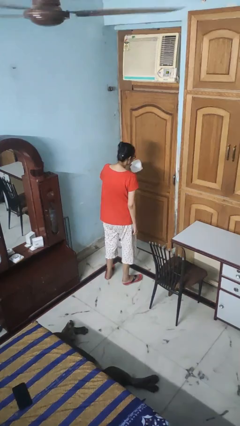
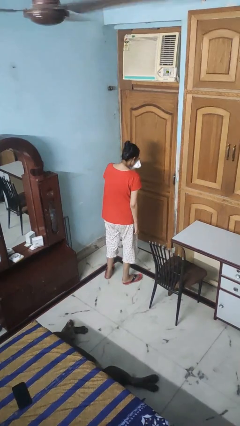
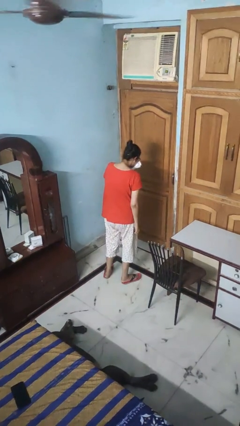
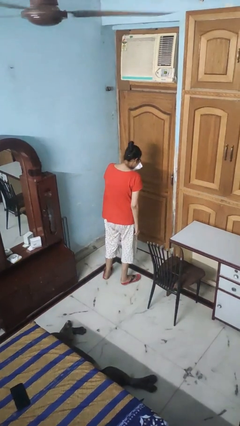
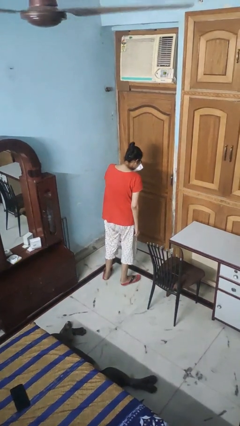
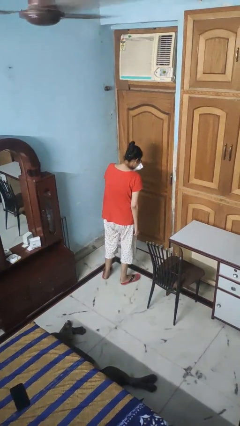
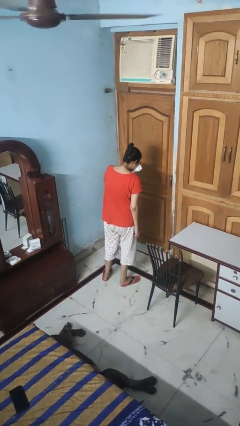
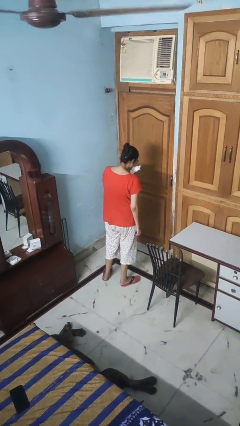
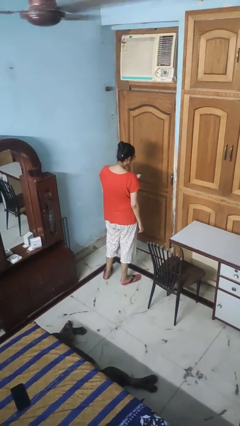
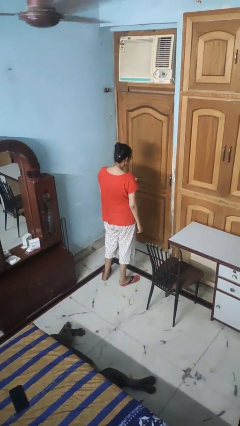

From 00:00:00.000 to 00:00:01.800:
person blows nose

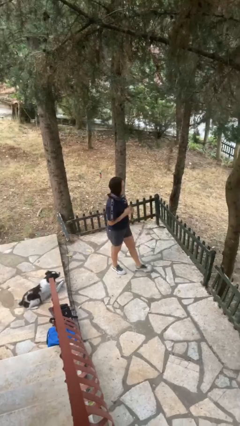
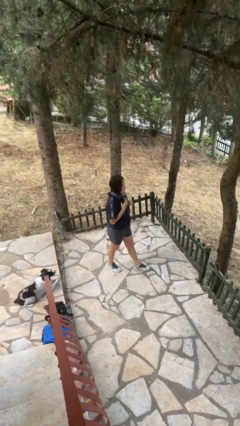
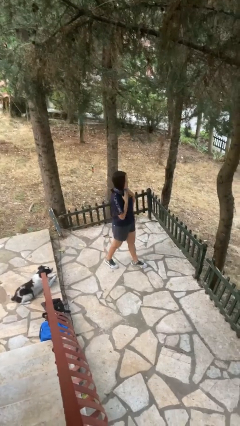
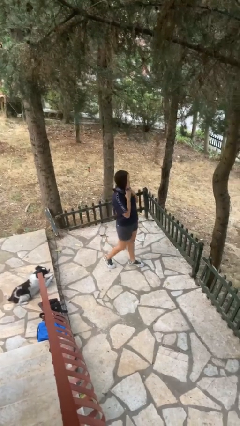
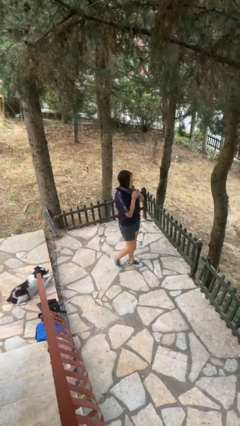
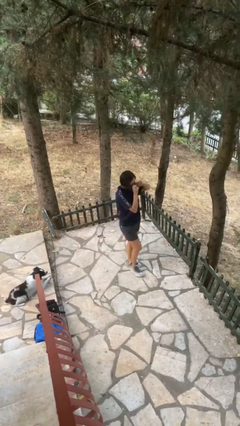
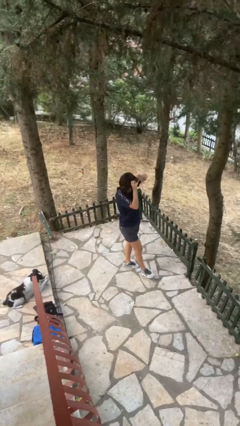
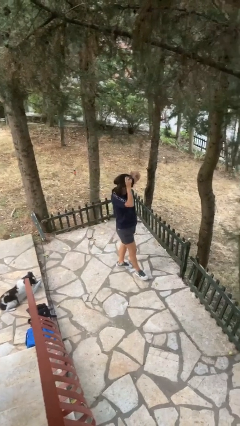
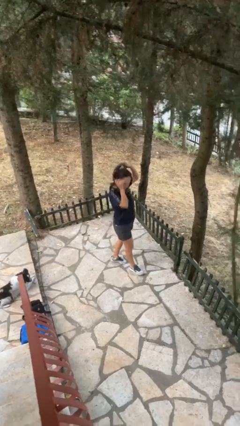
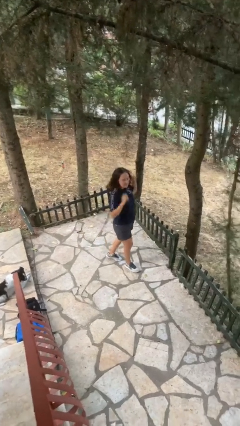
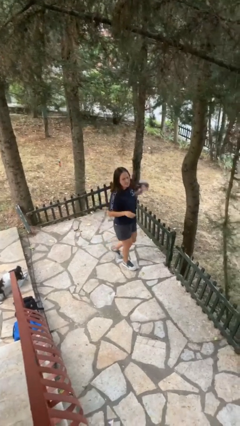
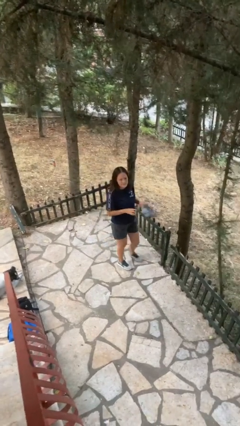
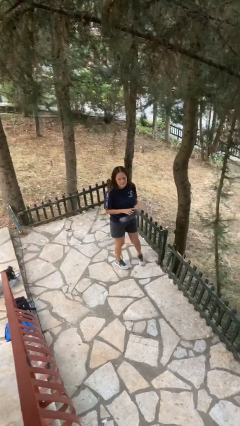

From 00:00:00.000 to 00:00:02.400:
person takes off scarf

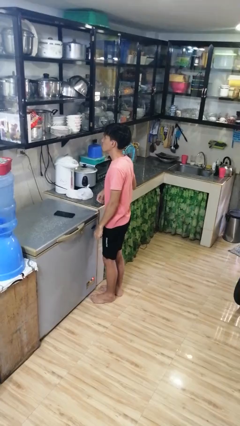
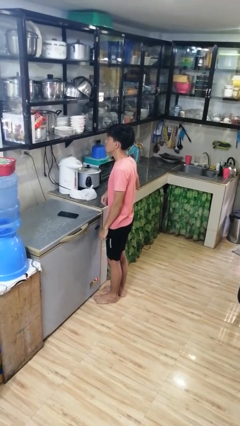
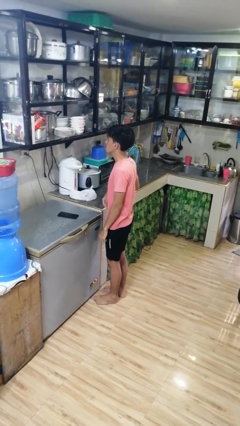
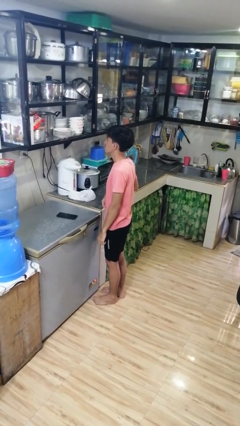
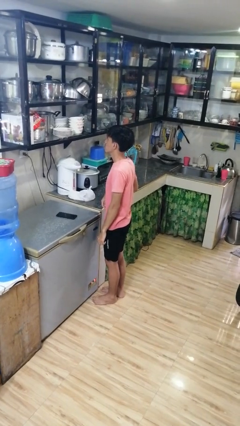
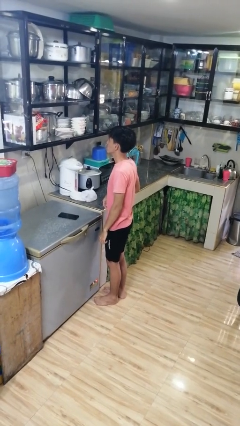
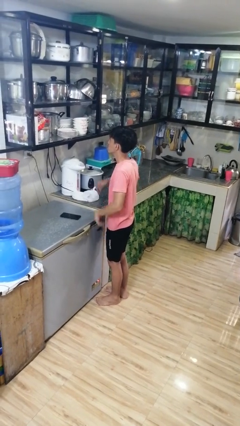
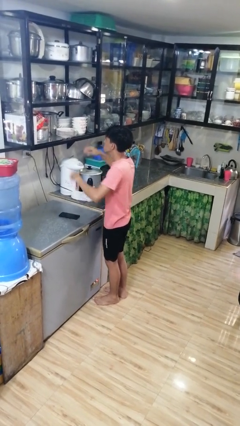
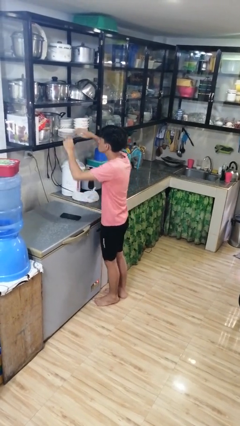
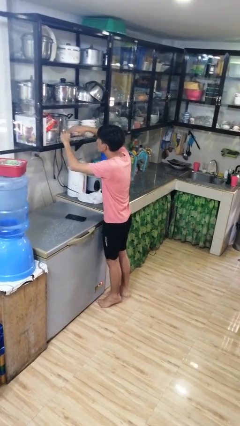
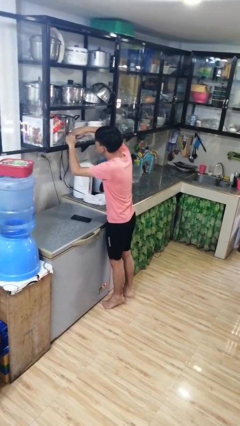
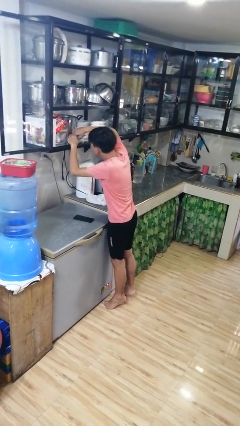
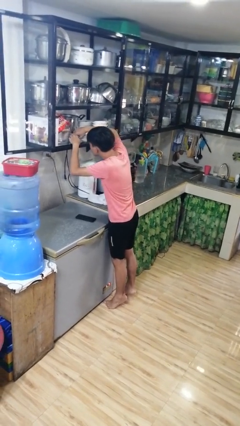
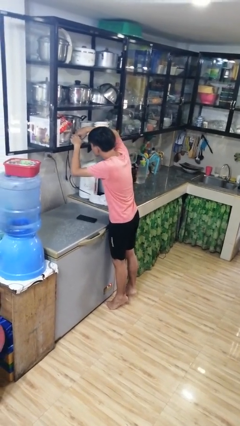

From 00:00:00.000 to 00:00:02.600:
person takes off backpack

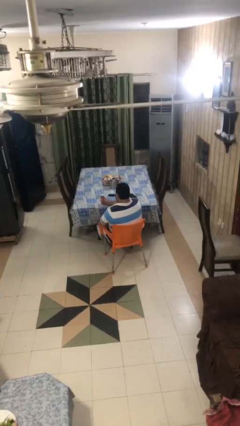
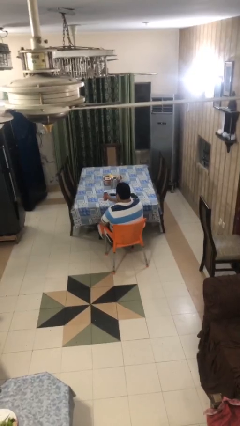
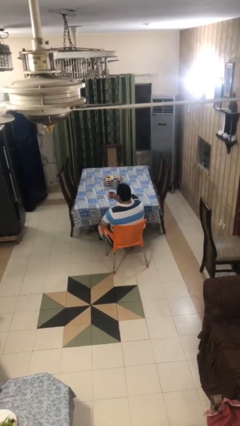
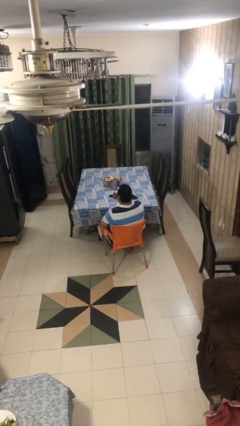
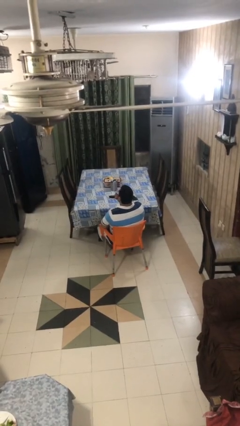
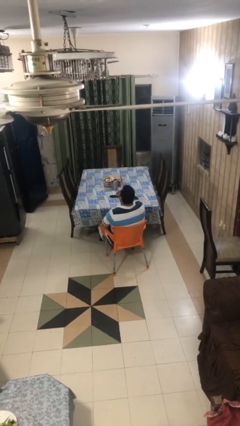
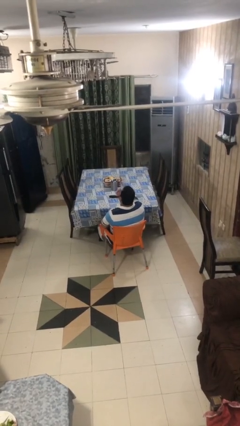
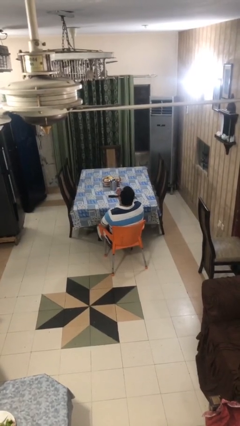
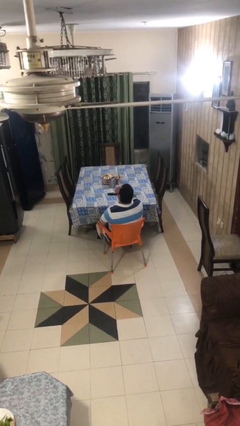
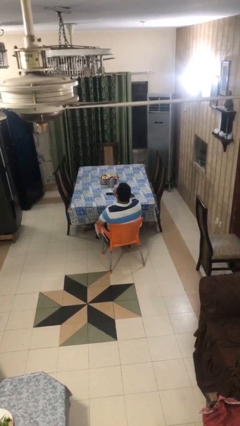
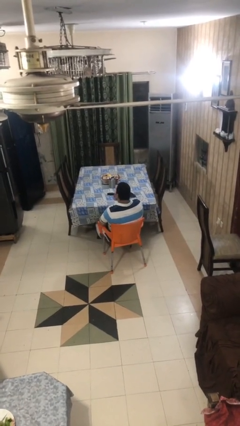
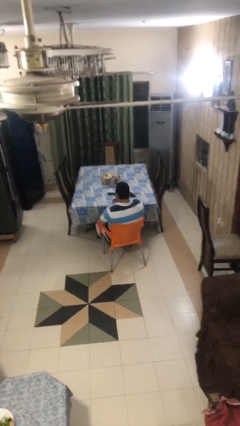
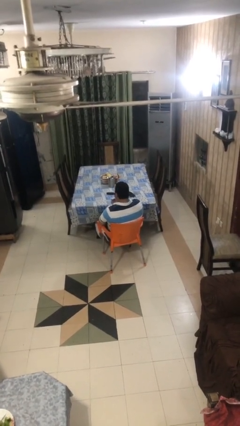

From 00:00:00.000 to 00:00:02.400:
person drinks from beverage can

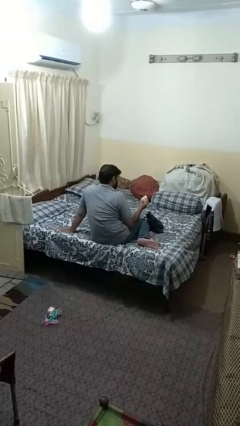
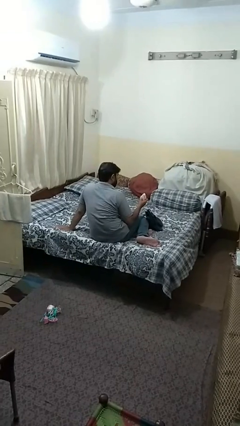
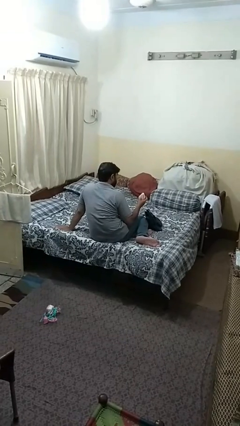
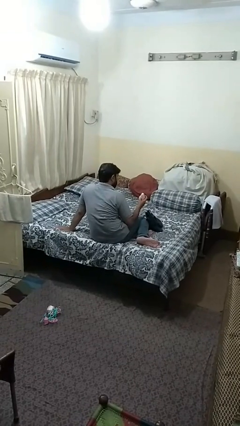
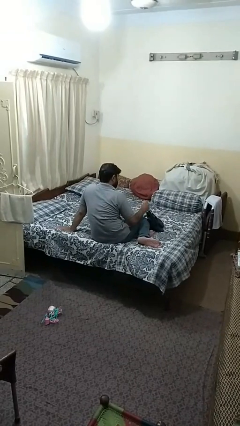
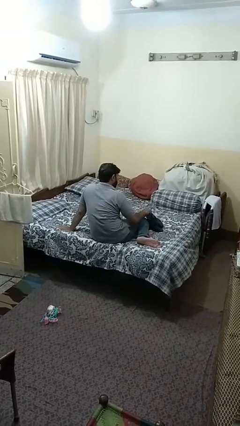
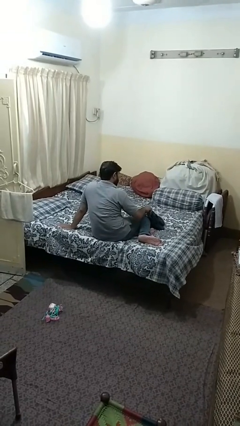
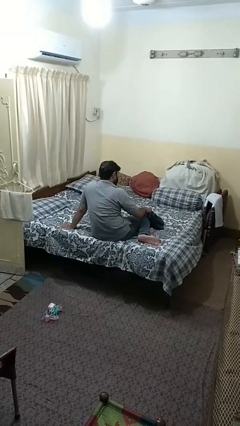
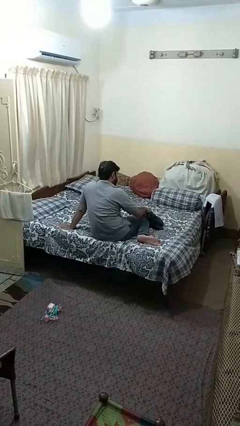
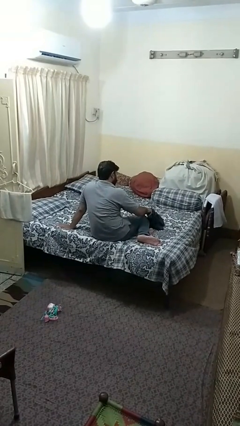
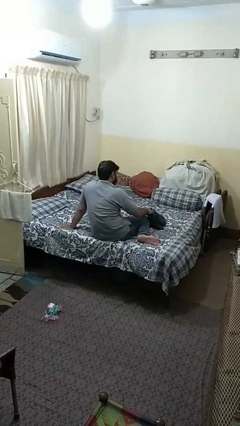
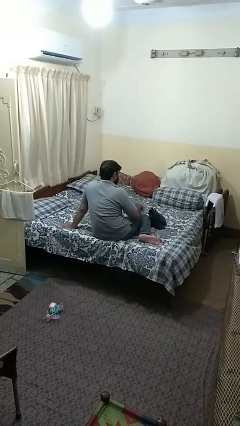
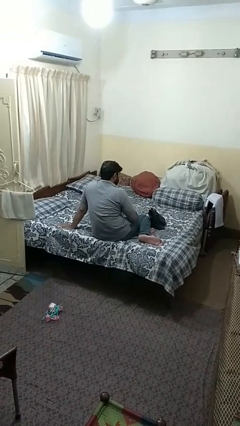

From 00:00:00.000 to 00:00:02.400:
person puts object into purse

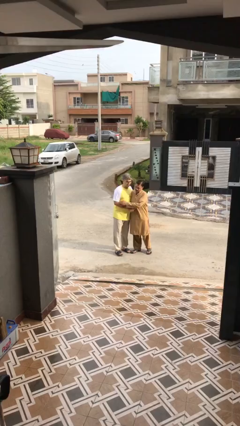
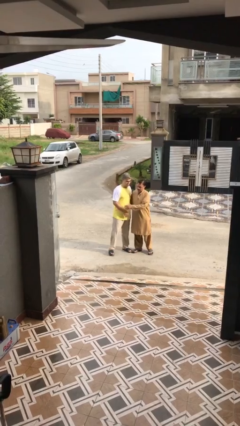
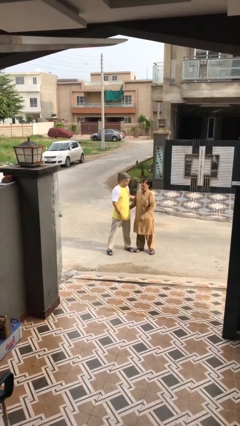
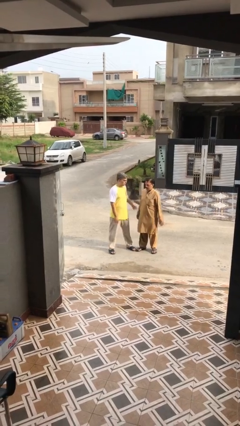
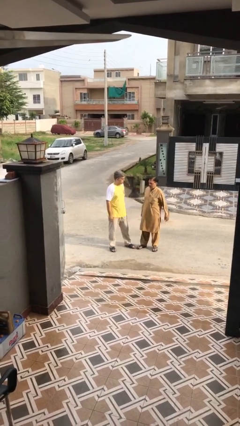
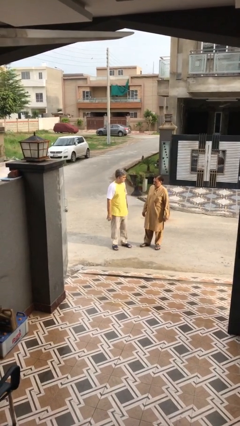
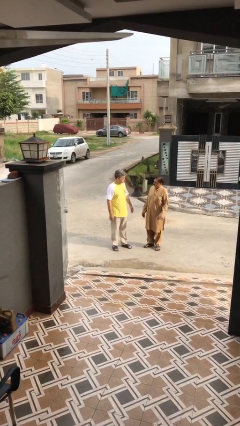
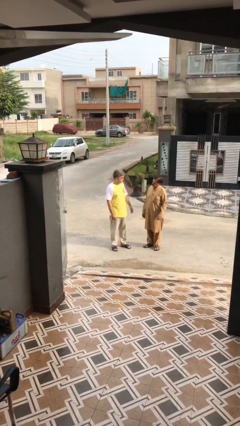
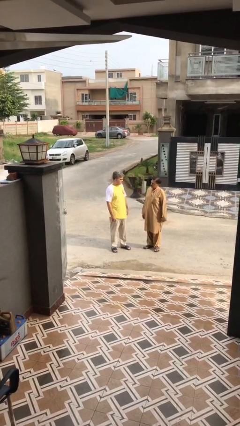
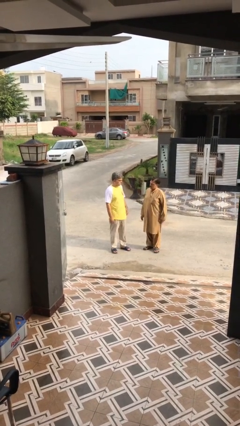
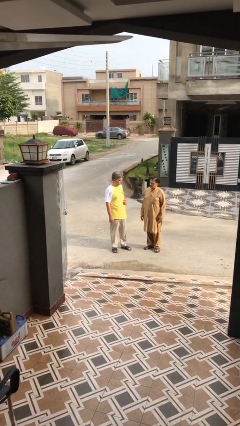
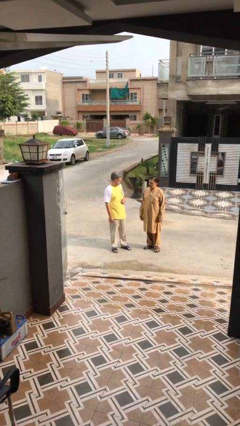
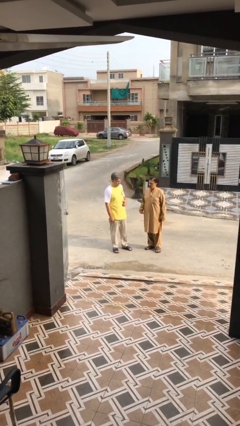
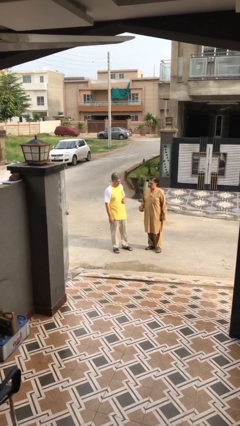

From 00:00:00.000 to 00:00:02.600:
person talks to person

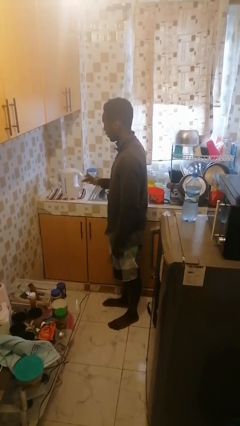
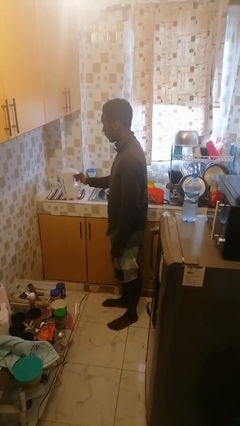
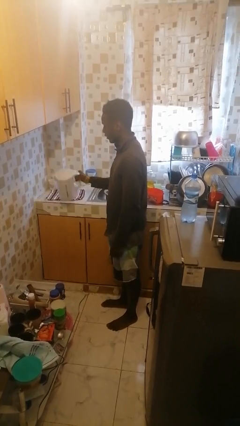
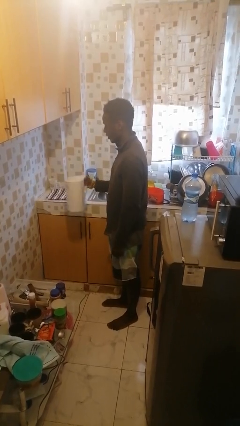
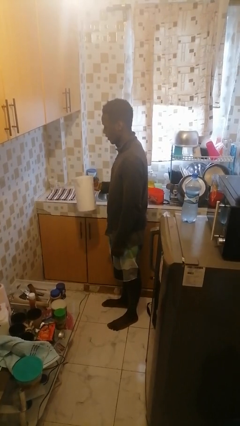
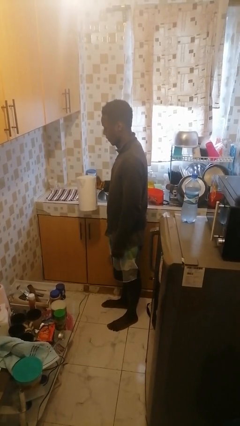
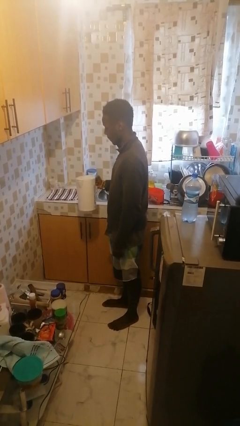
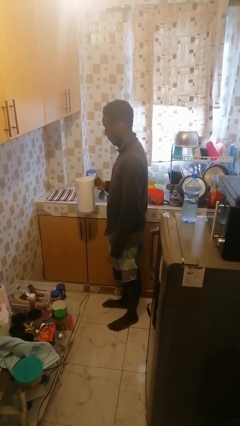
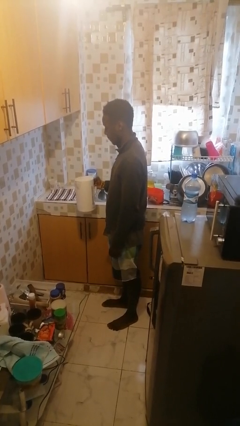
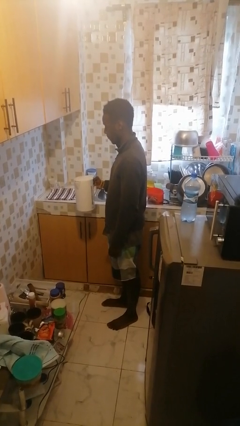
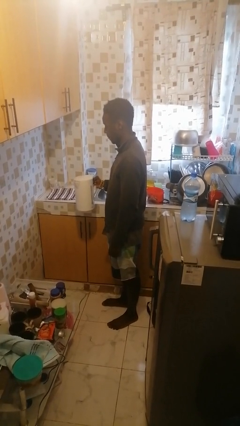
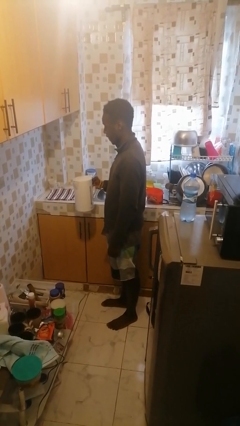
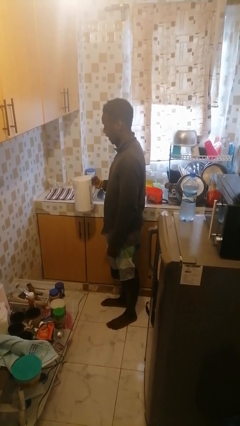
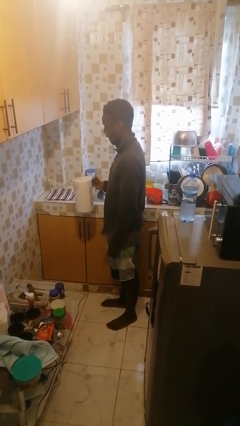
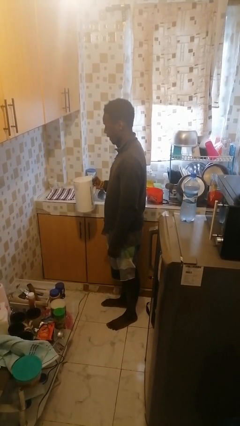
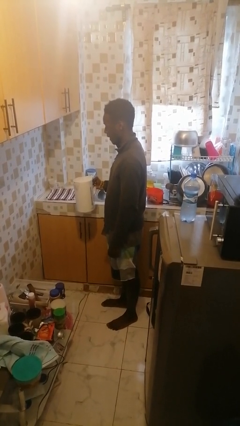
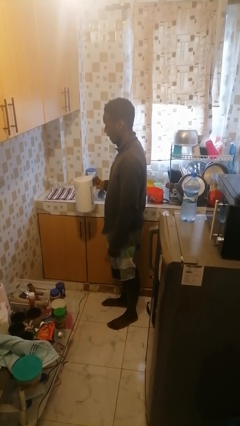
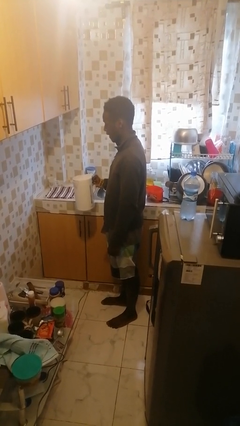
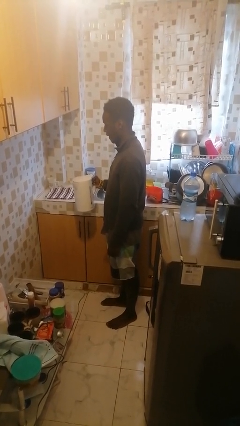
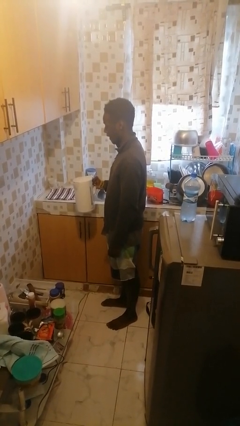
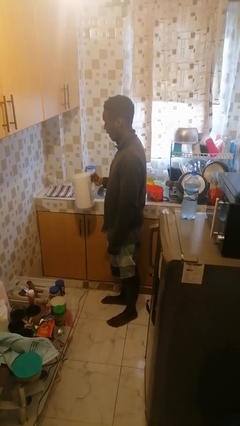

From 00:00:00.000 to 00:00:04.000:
person picks up object from countertop
